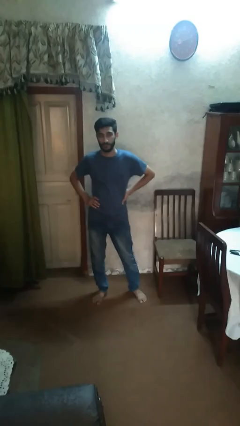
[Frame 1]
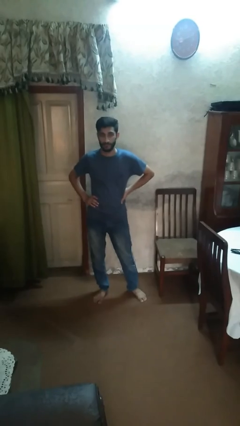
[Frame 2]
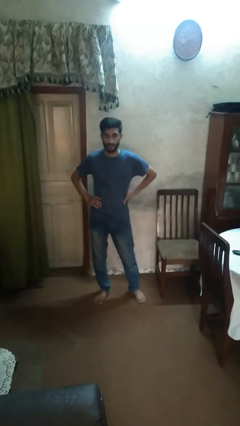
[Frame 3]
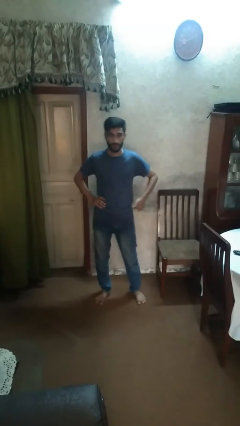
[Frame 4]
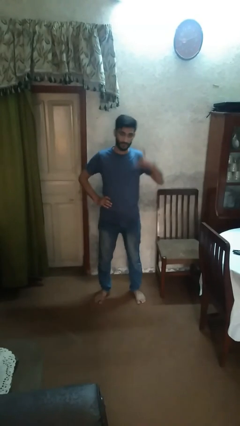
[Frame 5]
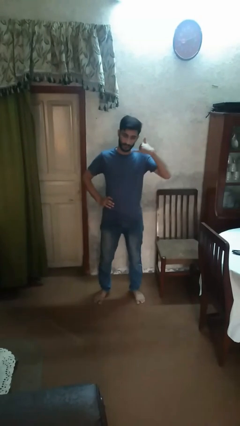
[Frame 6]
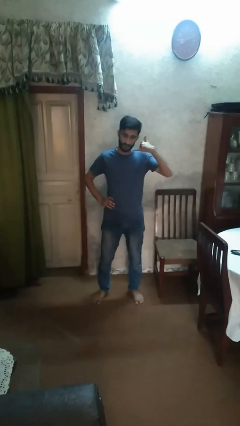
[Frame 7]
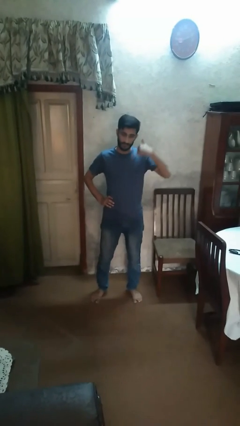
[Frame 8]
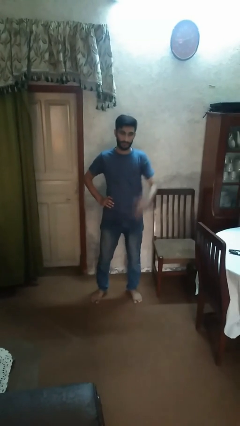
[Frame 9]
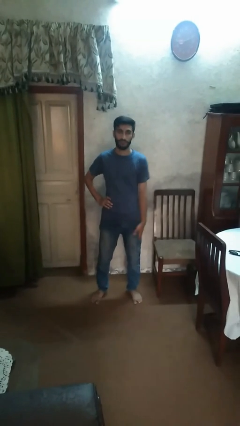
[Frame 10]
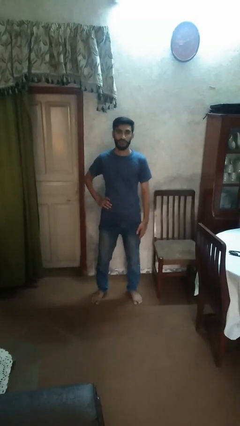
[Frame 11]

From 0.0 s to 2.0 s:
person gestures call me

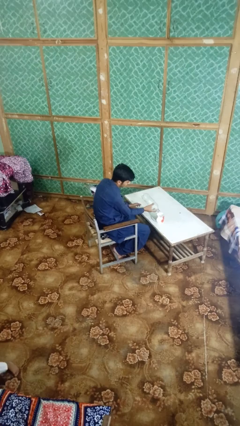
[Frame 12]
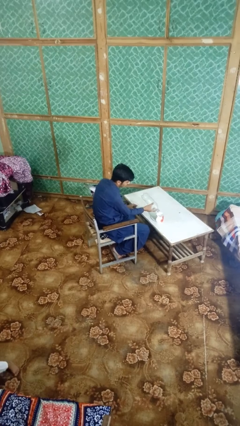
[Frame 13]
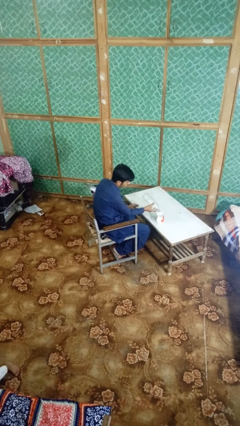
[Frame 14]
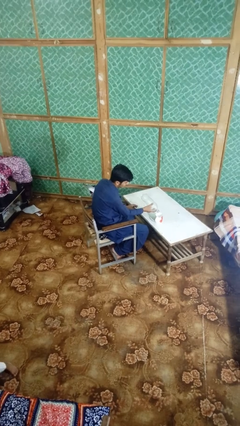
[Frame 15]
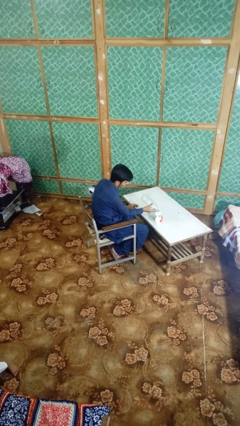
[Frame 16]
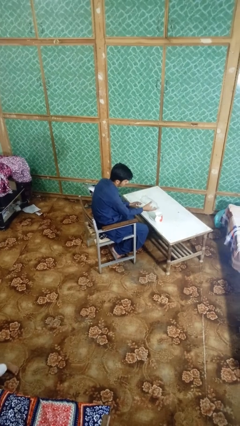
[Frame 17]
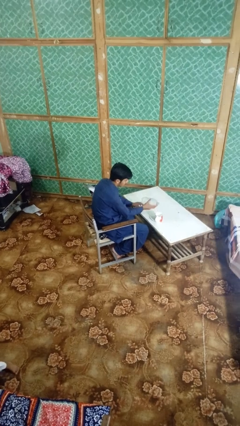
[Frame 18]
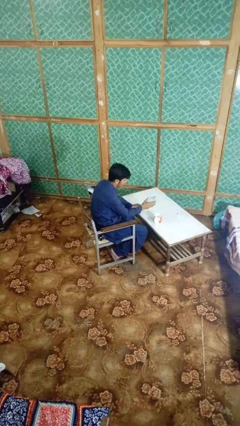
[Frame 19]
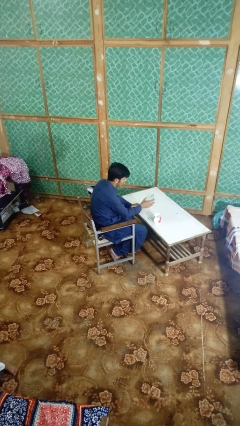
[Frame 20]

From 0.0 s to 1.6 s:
person pours liquid into cup

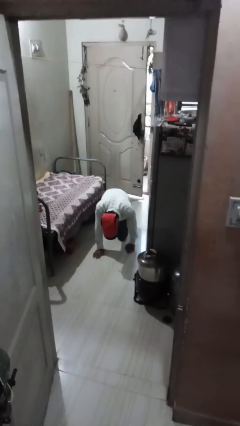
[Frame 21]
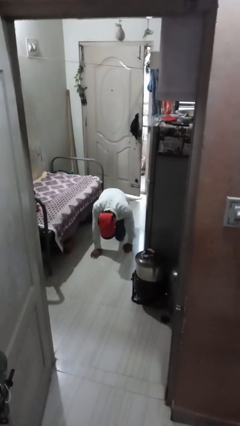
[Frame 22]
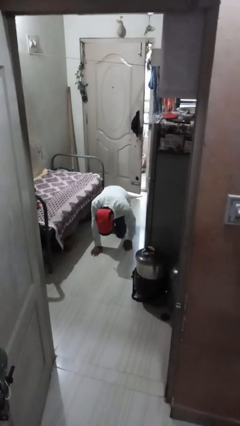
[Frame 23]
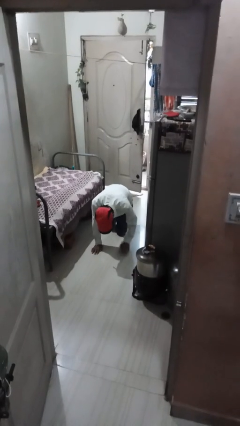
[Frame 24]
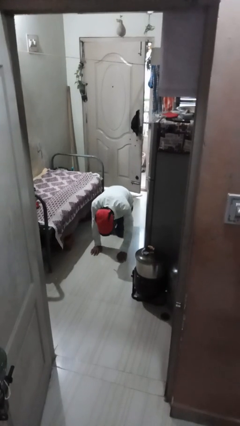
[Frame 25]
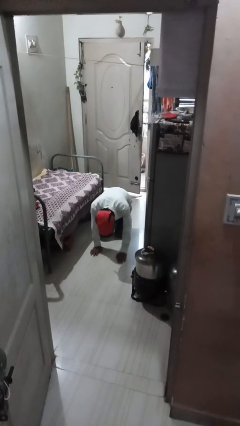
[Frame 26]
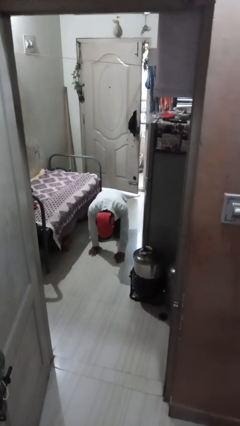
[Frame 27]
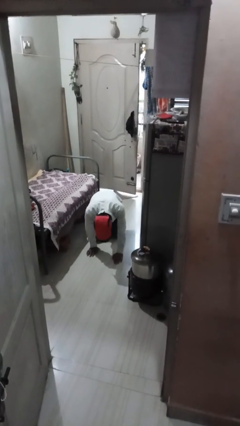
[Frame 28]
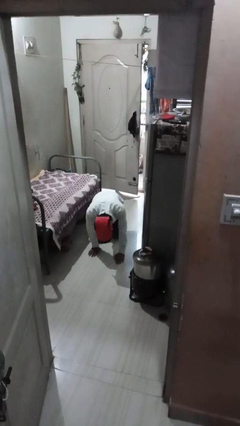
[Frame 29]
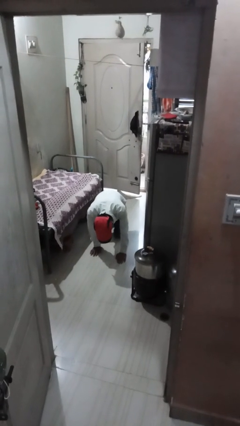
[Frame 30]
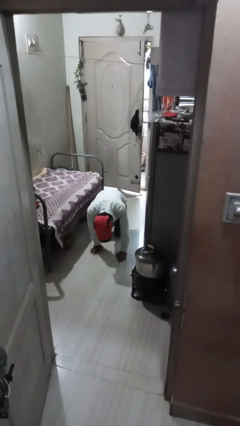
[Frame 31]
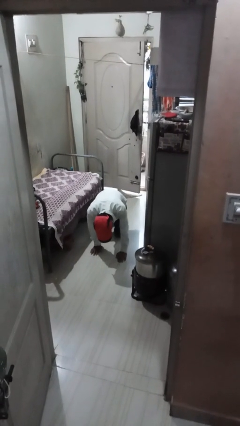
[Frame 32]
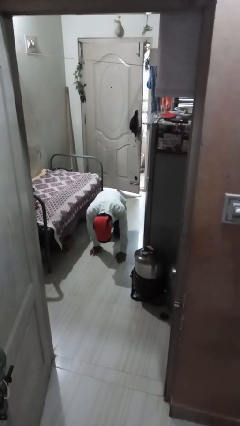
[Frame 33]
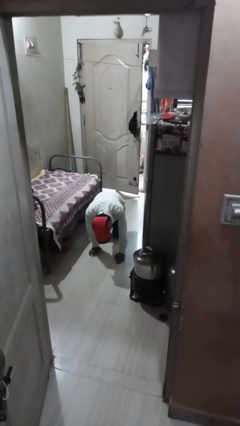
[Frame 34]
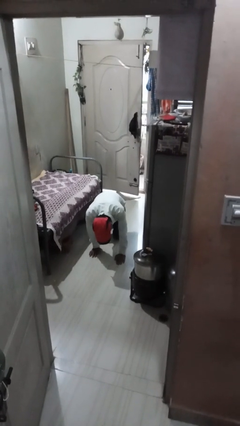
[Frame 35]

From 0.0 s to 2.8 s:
person crawls

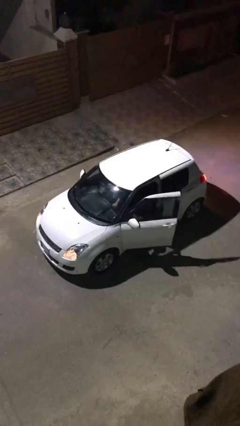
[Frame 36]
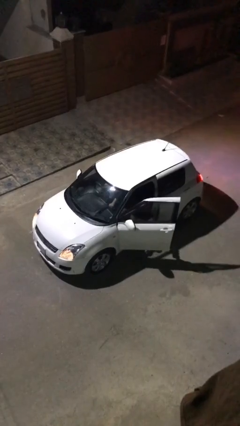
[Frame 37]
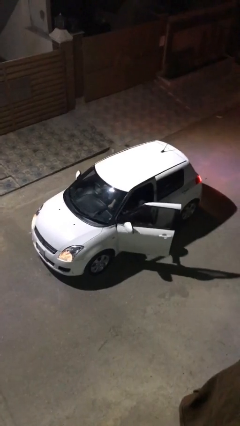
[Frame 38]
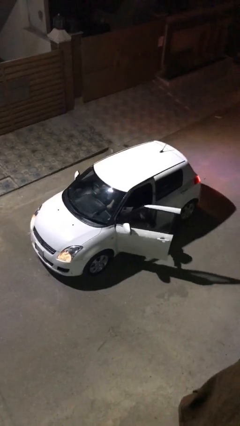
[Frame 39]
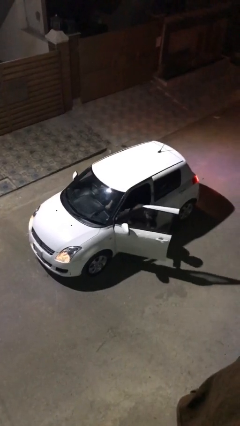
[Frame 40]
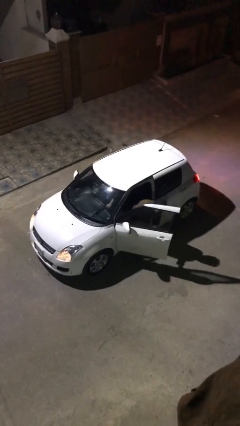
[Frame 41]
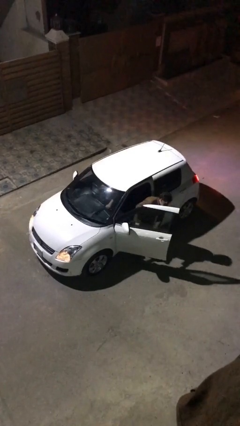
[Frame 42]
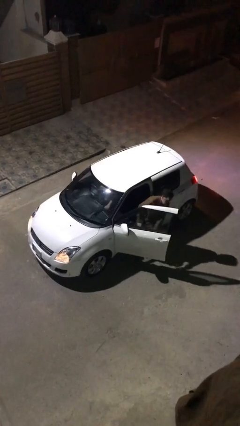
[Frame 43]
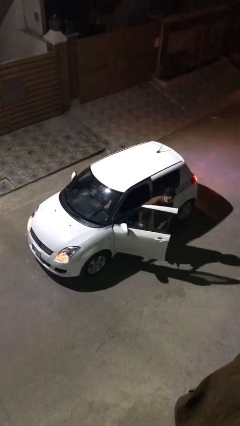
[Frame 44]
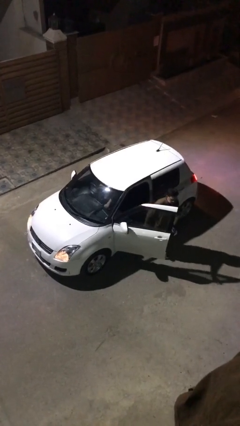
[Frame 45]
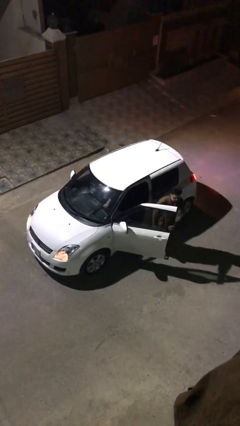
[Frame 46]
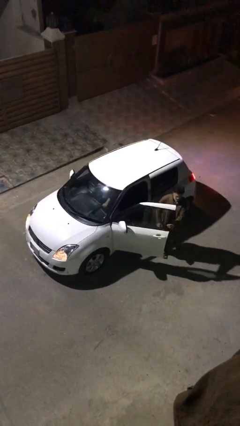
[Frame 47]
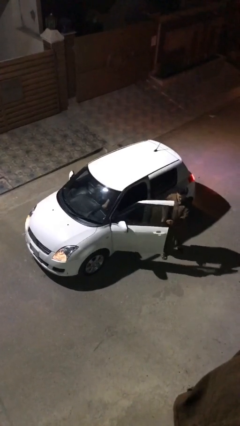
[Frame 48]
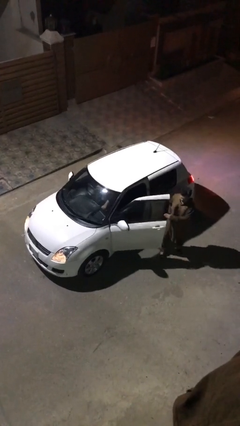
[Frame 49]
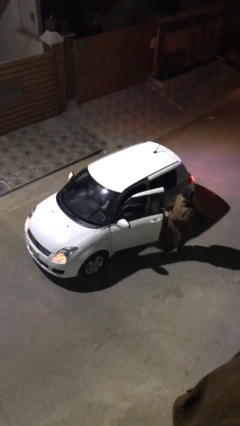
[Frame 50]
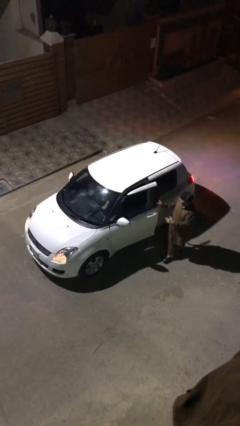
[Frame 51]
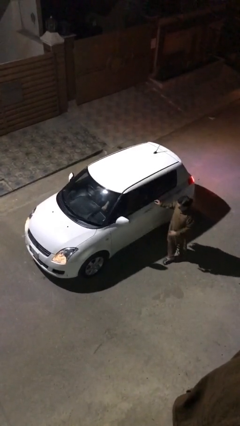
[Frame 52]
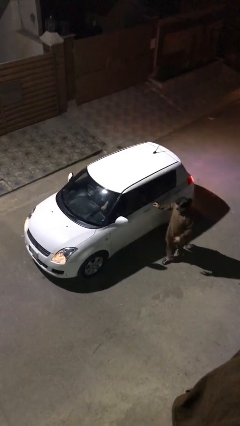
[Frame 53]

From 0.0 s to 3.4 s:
car drops off person

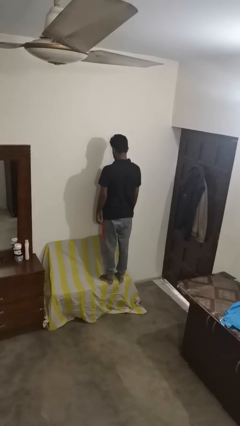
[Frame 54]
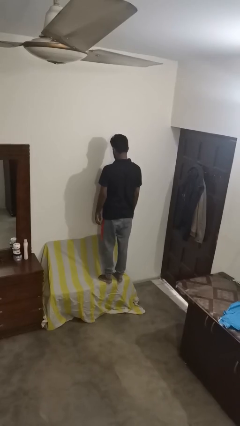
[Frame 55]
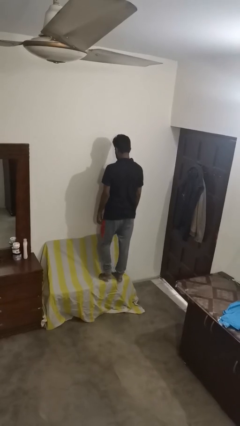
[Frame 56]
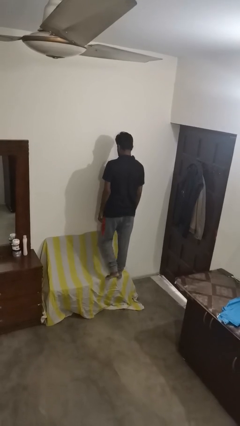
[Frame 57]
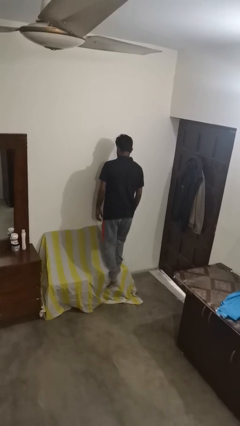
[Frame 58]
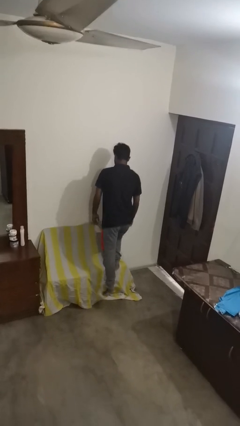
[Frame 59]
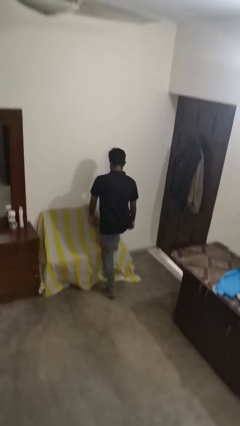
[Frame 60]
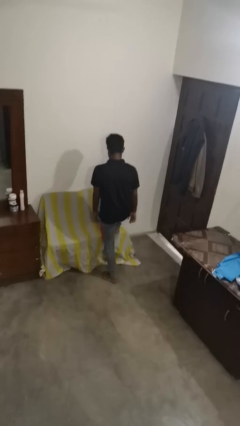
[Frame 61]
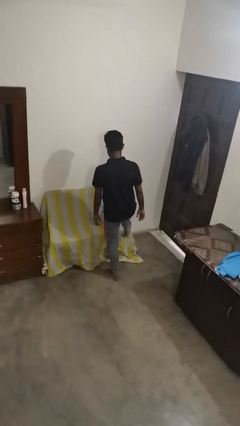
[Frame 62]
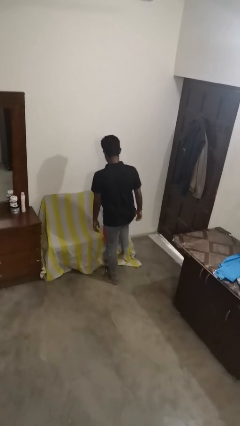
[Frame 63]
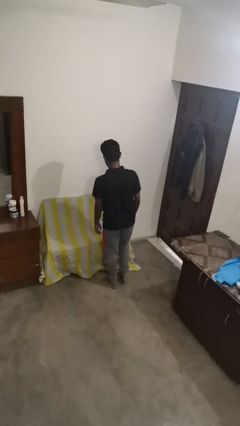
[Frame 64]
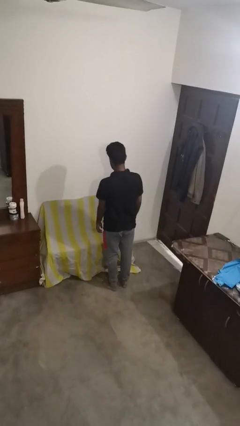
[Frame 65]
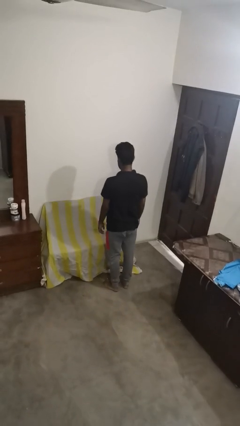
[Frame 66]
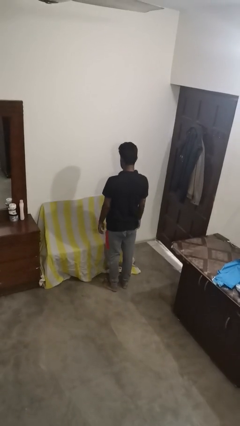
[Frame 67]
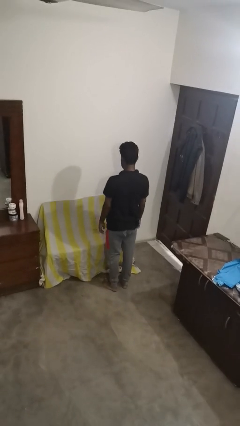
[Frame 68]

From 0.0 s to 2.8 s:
person climbs off couch

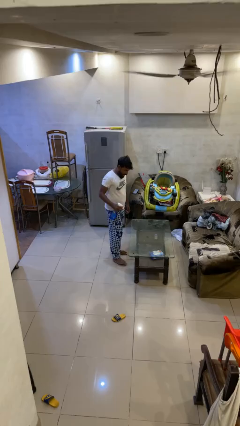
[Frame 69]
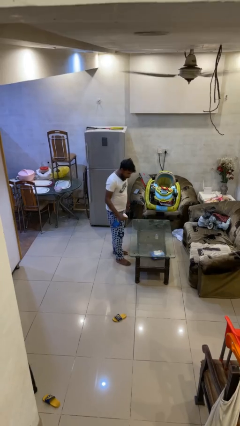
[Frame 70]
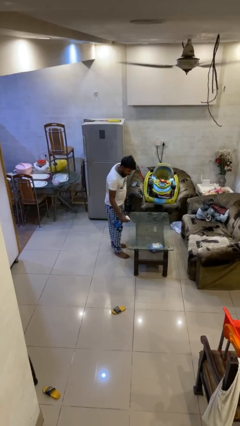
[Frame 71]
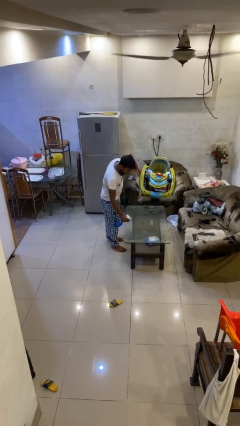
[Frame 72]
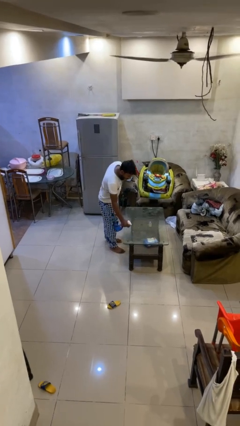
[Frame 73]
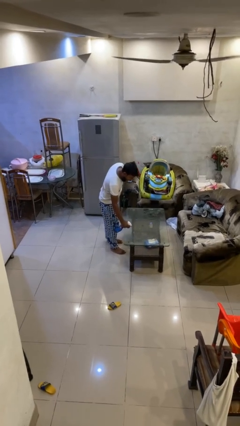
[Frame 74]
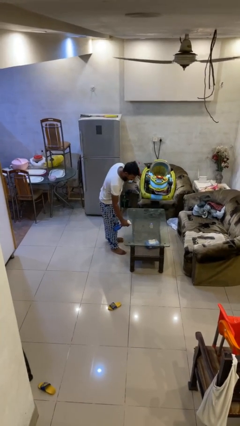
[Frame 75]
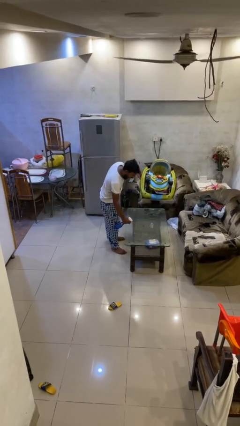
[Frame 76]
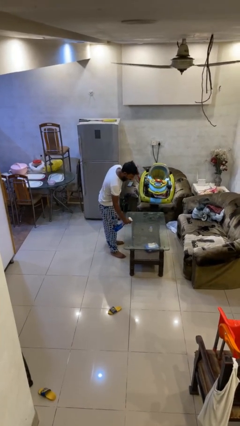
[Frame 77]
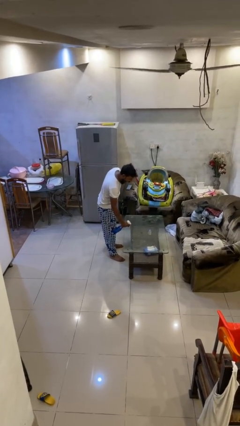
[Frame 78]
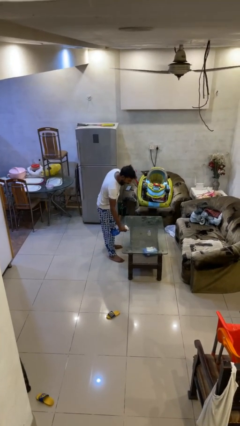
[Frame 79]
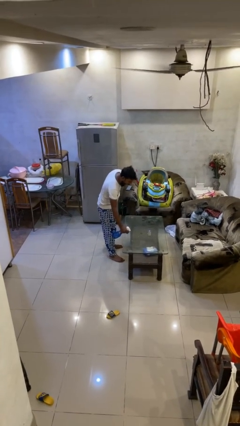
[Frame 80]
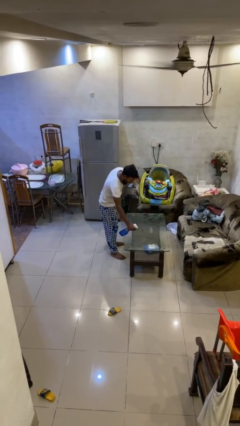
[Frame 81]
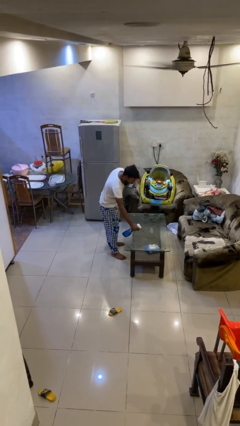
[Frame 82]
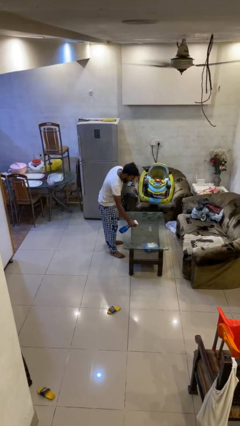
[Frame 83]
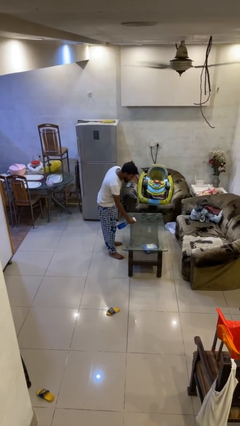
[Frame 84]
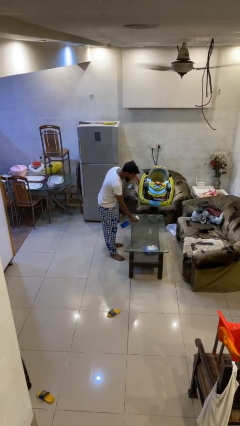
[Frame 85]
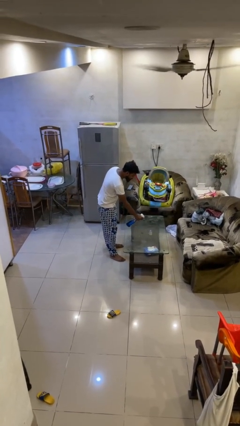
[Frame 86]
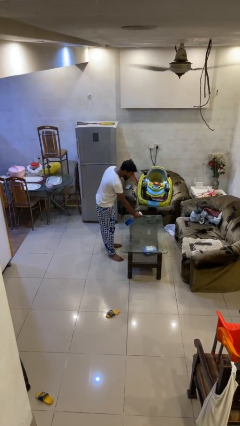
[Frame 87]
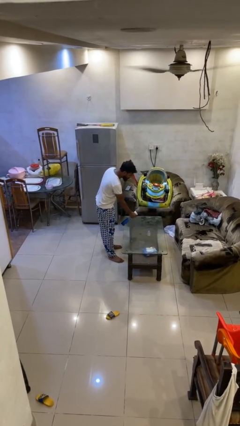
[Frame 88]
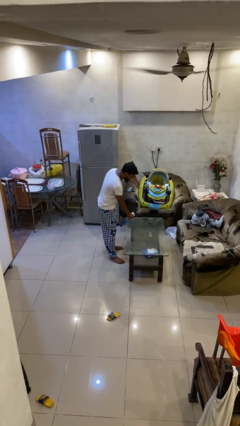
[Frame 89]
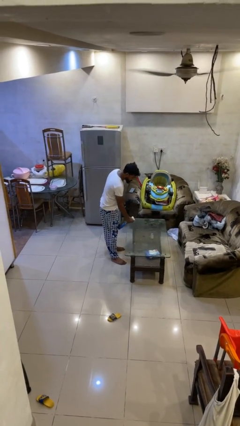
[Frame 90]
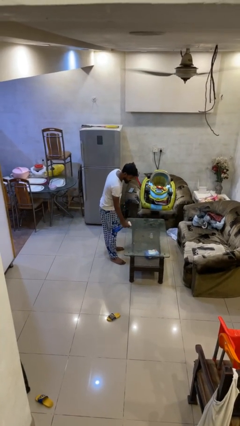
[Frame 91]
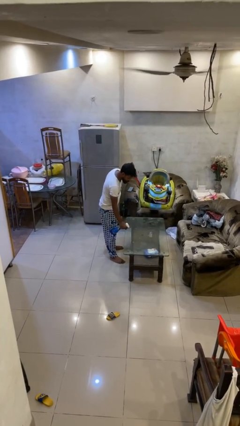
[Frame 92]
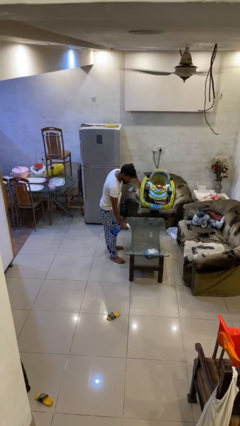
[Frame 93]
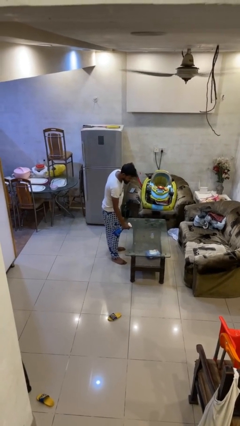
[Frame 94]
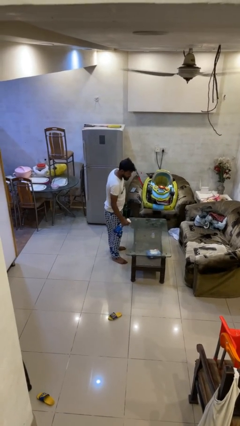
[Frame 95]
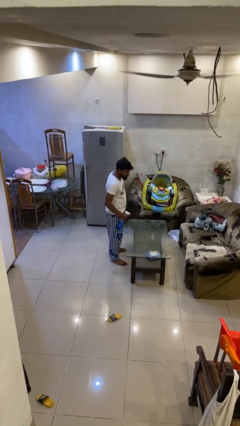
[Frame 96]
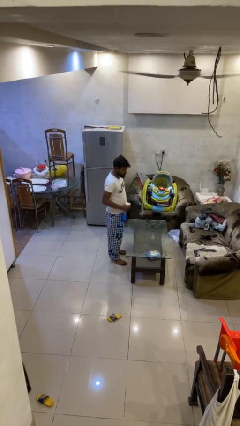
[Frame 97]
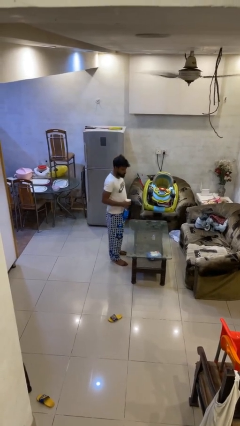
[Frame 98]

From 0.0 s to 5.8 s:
person sprays from bottle
